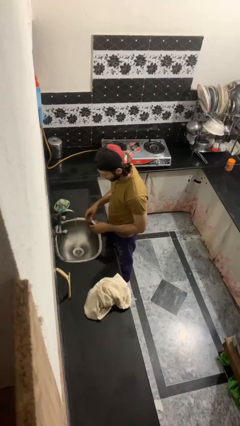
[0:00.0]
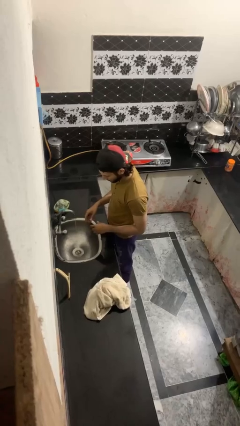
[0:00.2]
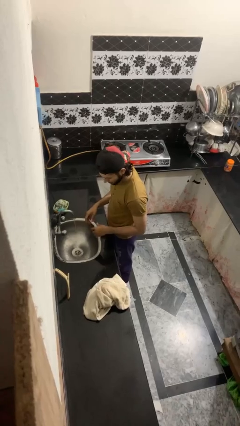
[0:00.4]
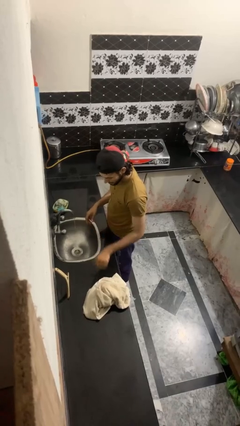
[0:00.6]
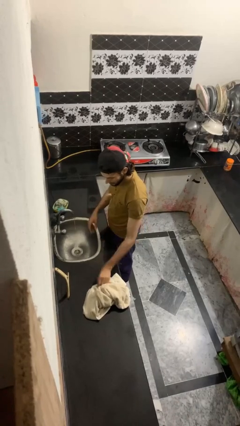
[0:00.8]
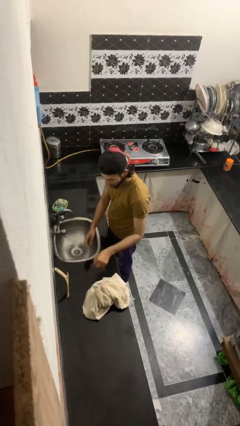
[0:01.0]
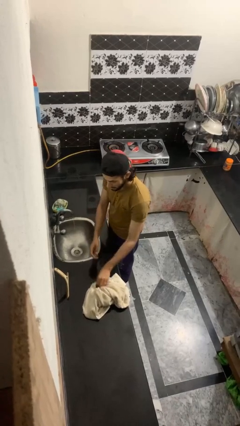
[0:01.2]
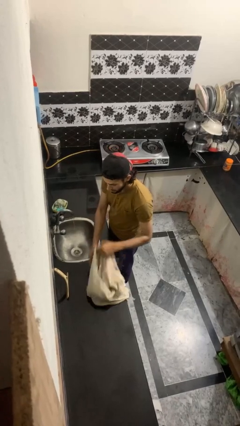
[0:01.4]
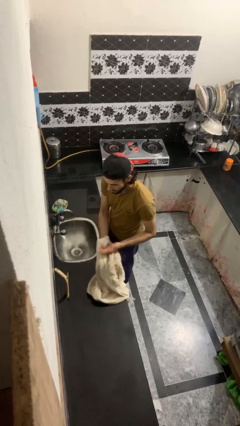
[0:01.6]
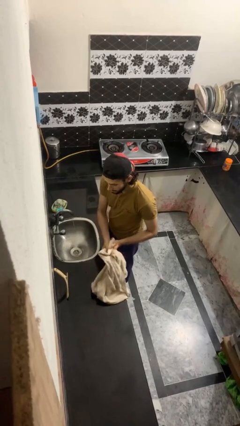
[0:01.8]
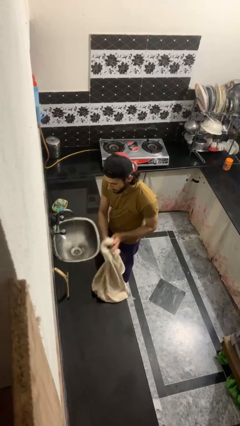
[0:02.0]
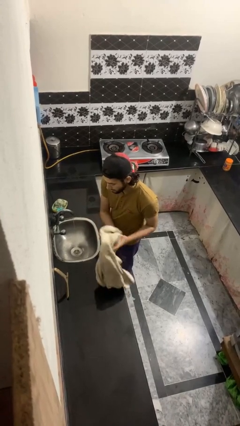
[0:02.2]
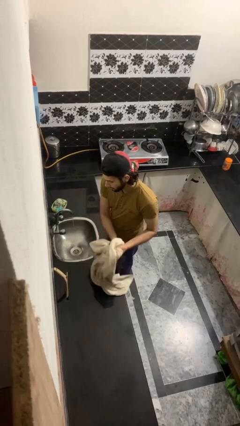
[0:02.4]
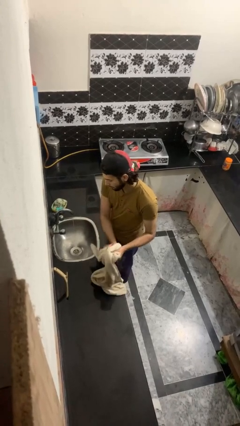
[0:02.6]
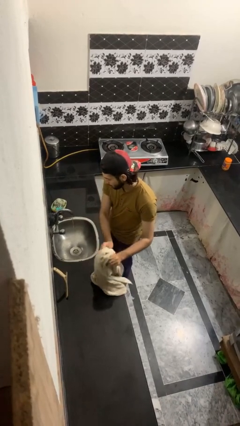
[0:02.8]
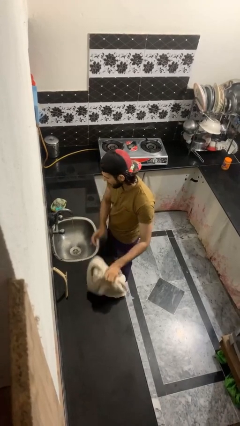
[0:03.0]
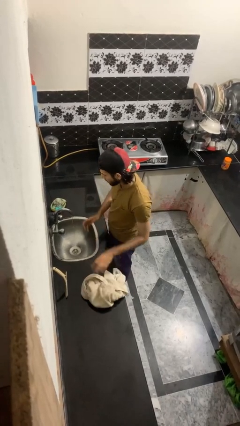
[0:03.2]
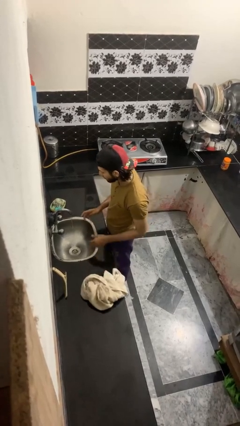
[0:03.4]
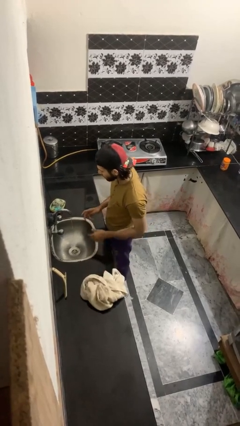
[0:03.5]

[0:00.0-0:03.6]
person dries hands with towel

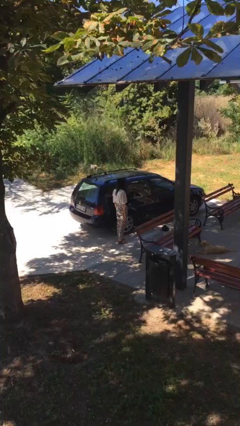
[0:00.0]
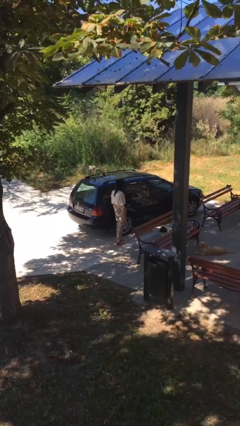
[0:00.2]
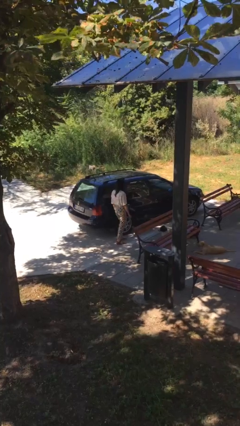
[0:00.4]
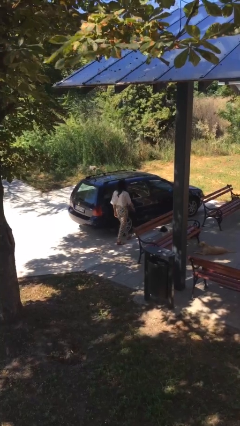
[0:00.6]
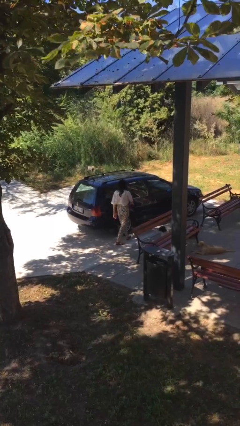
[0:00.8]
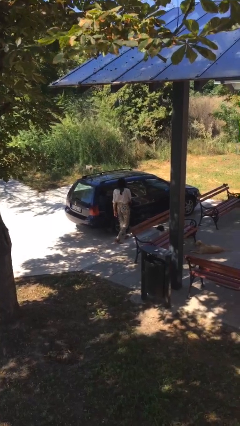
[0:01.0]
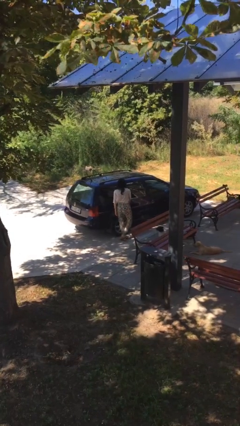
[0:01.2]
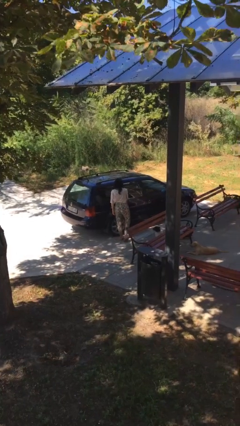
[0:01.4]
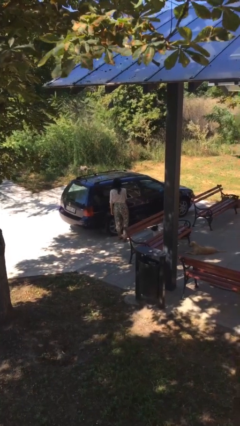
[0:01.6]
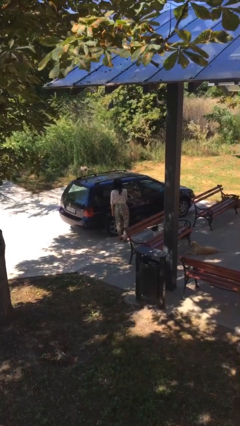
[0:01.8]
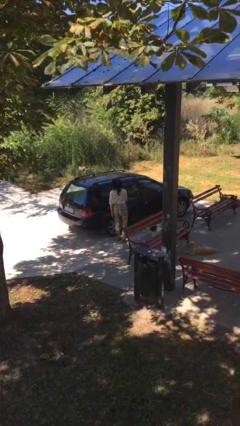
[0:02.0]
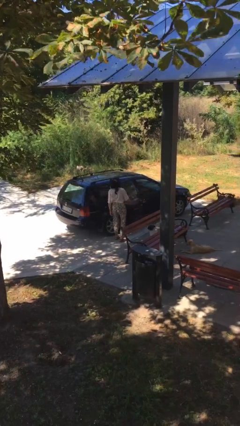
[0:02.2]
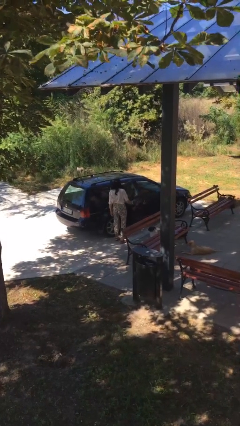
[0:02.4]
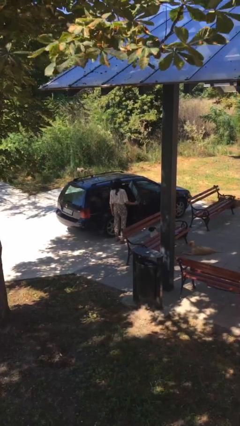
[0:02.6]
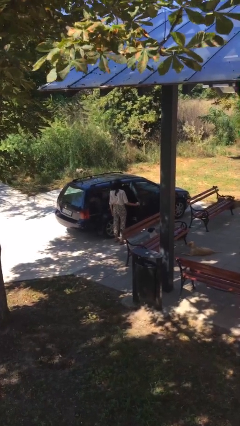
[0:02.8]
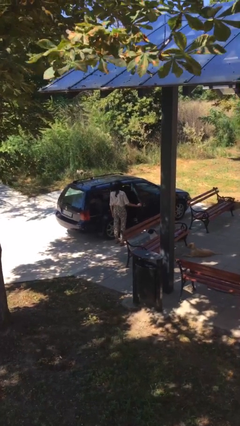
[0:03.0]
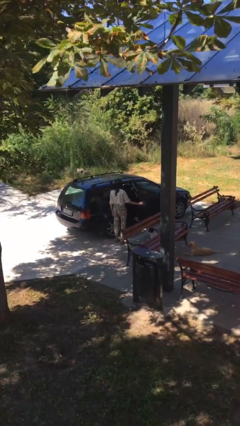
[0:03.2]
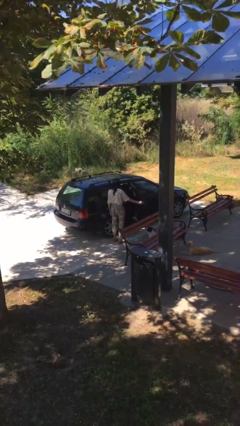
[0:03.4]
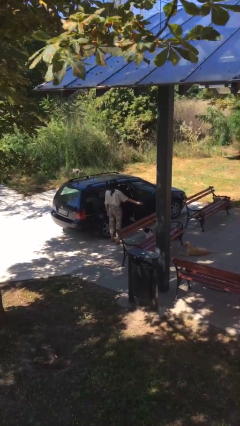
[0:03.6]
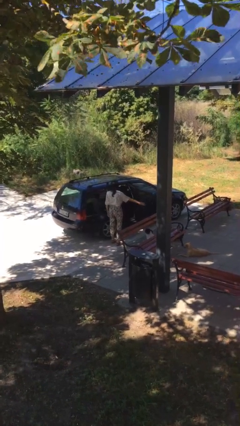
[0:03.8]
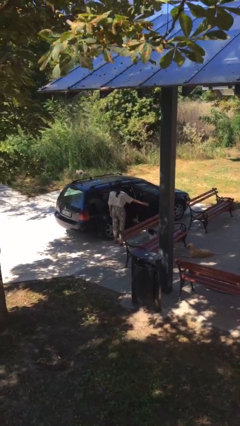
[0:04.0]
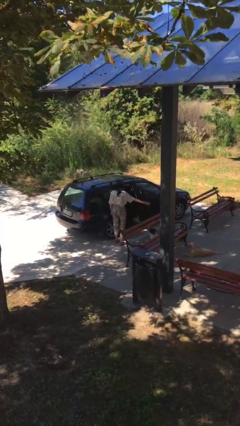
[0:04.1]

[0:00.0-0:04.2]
person opens car door

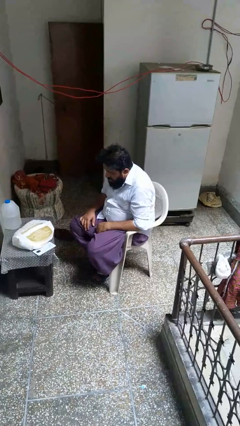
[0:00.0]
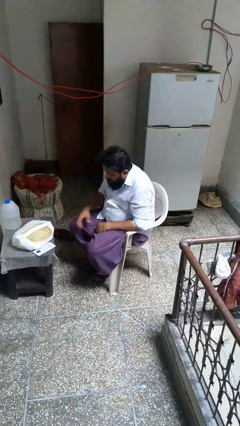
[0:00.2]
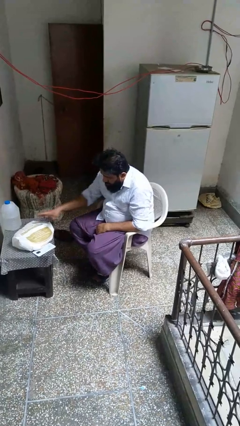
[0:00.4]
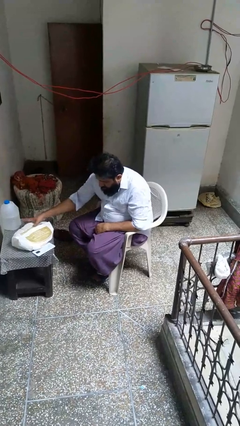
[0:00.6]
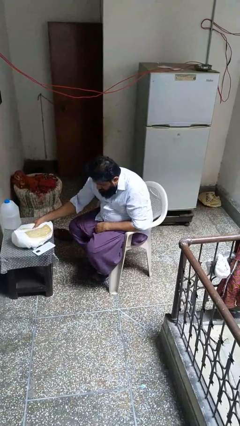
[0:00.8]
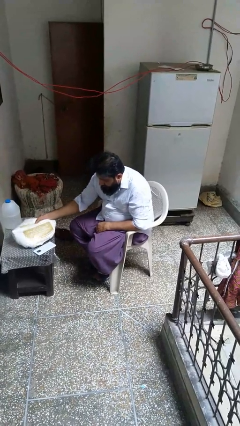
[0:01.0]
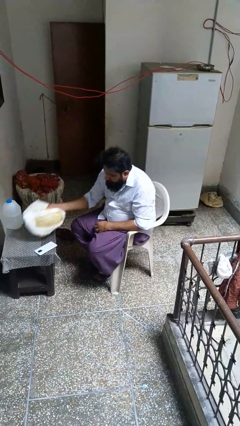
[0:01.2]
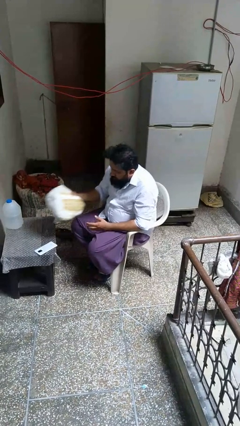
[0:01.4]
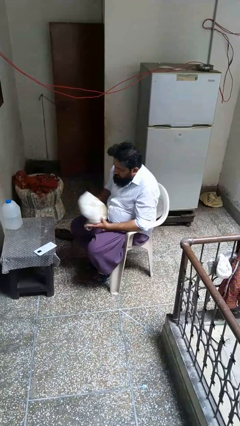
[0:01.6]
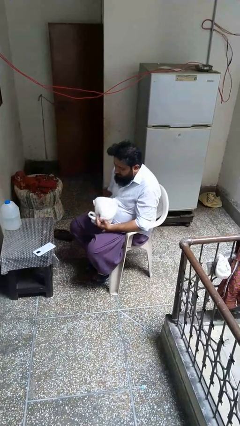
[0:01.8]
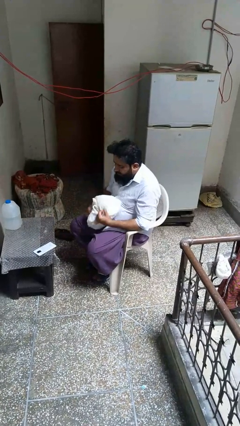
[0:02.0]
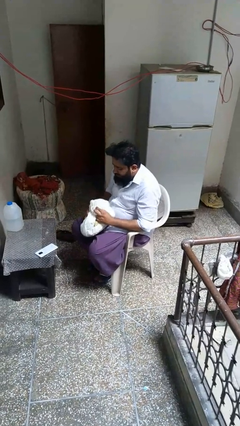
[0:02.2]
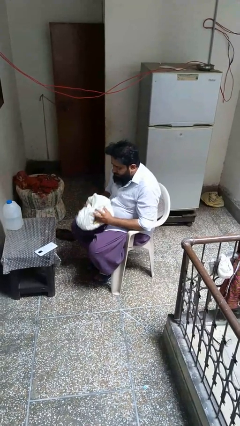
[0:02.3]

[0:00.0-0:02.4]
person picks up object from table

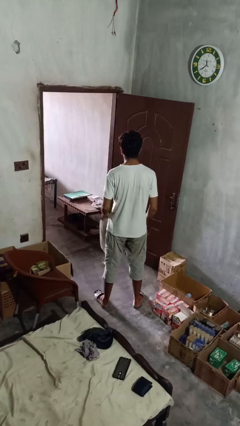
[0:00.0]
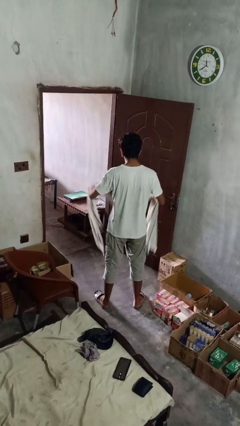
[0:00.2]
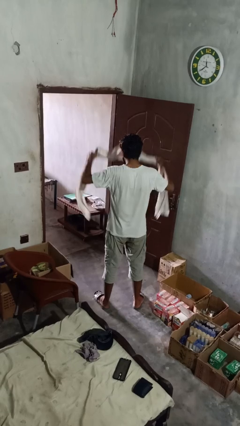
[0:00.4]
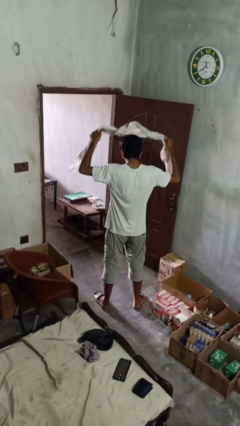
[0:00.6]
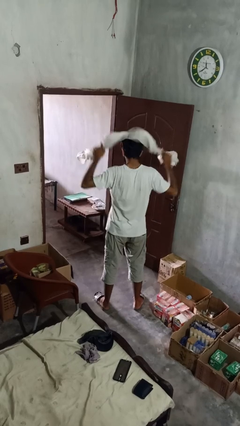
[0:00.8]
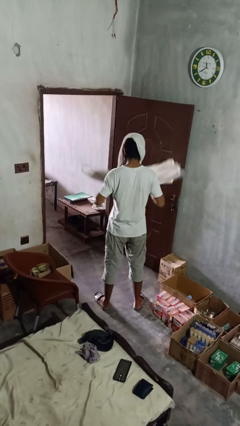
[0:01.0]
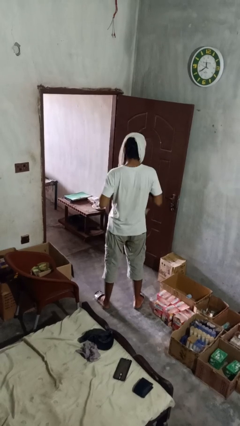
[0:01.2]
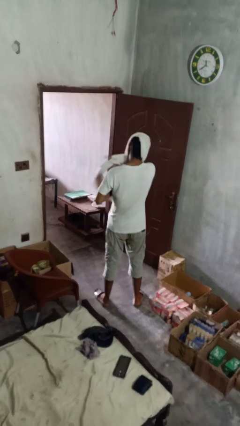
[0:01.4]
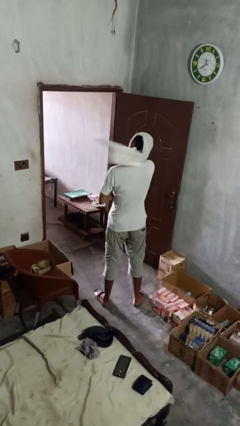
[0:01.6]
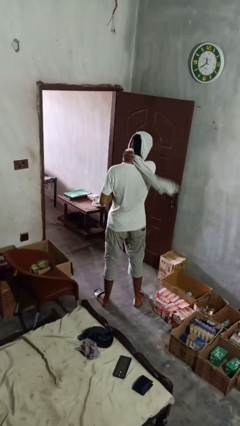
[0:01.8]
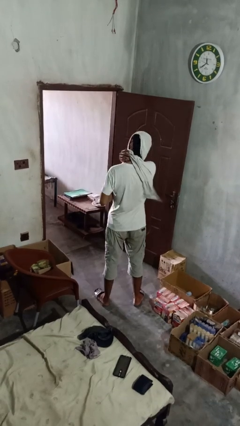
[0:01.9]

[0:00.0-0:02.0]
person puts on scarf

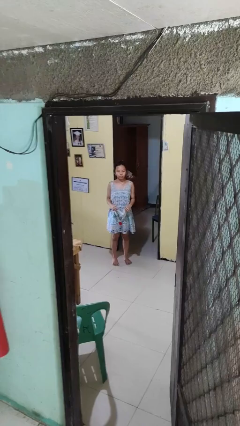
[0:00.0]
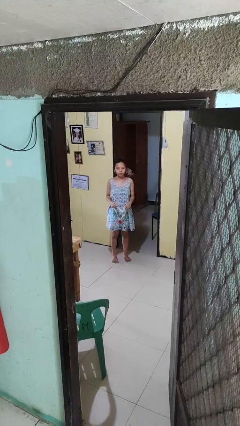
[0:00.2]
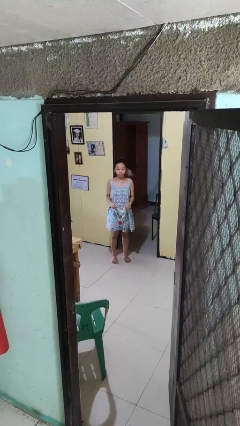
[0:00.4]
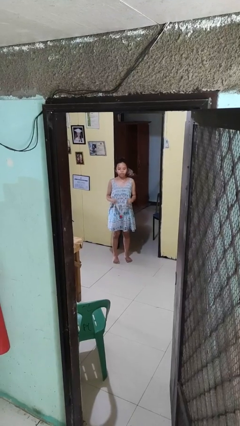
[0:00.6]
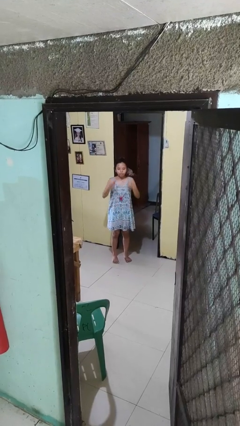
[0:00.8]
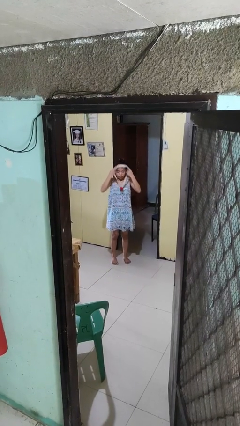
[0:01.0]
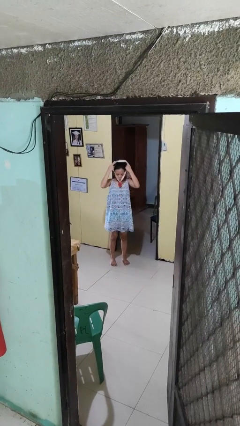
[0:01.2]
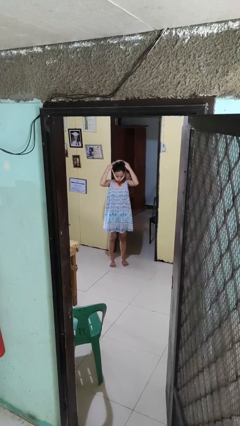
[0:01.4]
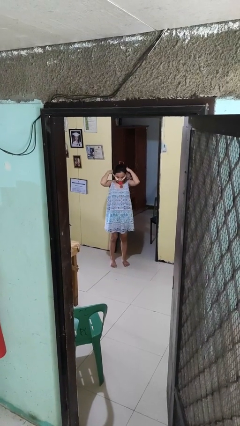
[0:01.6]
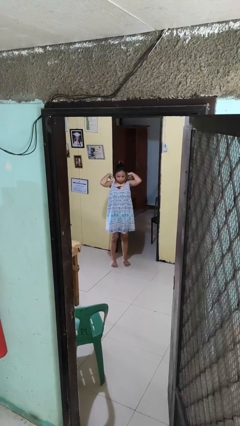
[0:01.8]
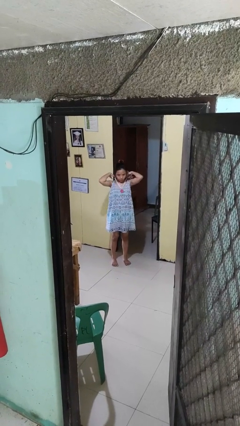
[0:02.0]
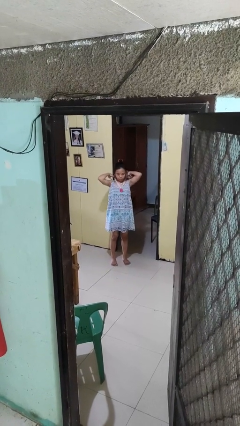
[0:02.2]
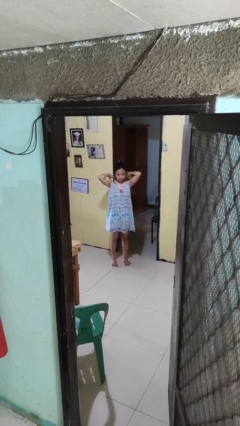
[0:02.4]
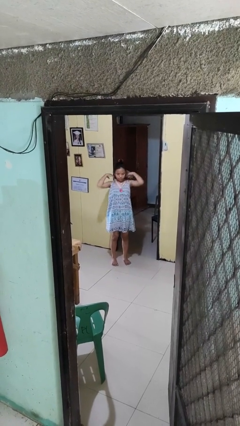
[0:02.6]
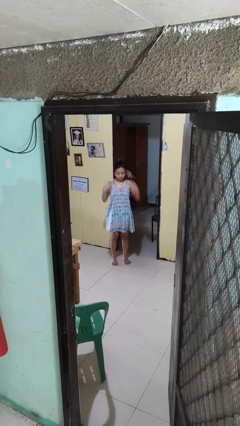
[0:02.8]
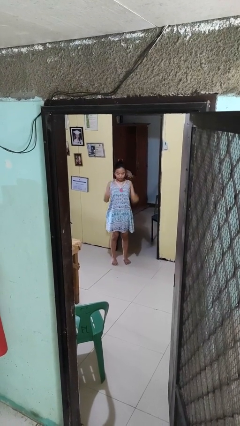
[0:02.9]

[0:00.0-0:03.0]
person puts on necklace

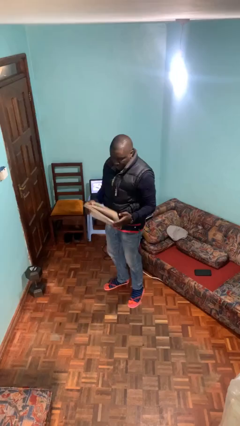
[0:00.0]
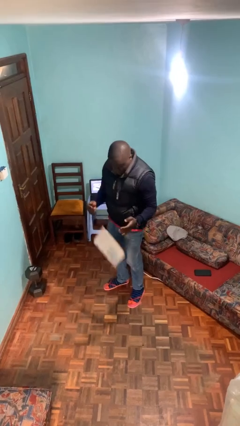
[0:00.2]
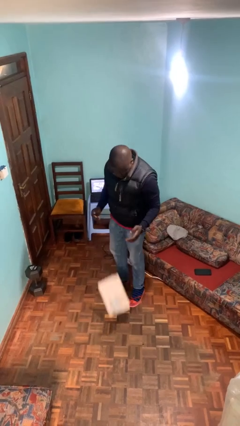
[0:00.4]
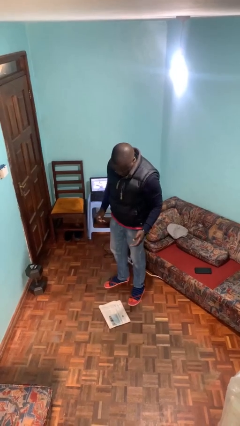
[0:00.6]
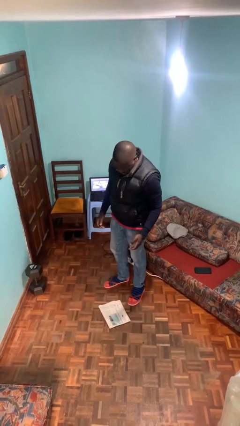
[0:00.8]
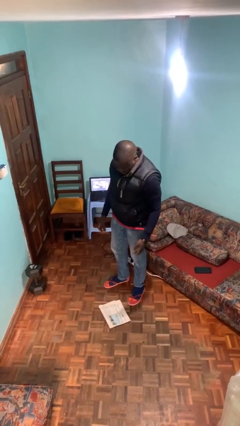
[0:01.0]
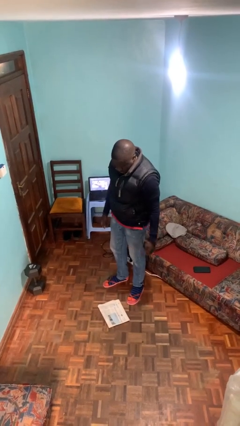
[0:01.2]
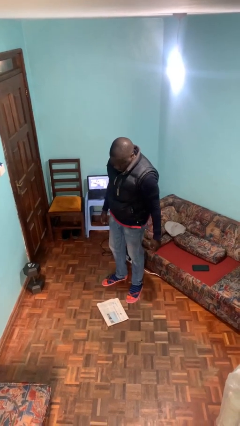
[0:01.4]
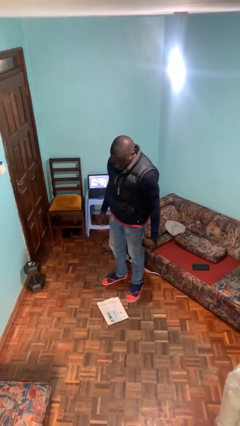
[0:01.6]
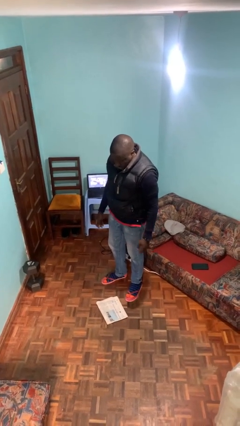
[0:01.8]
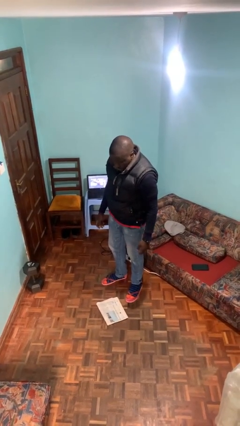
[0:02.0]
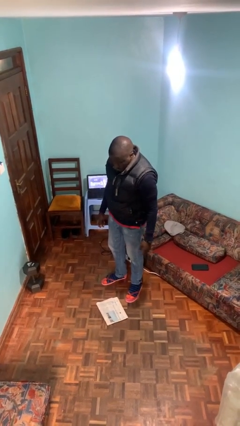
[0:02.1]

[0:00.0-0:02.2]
person drops object
